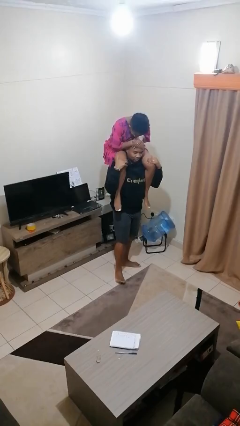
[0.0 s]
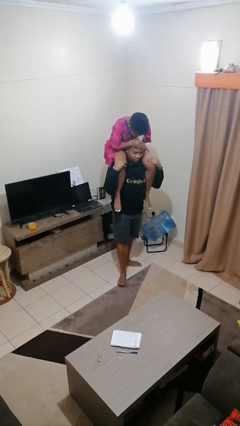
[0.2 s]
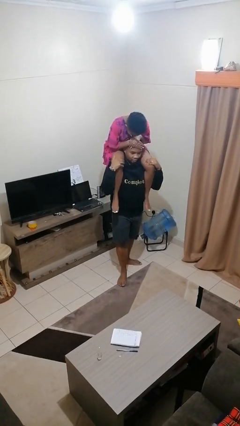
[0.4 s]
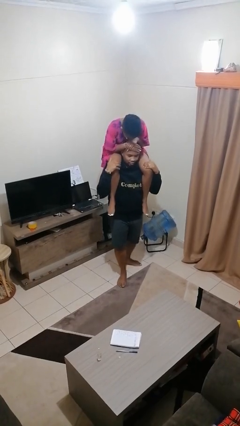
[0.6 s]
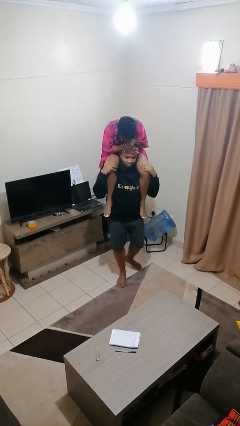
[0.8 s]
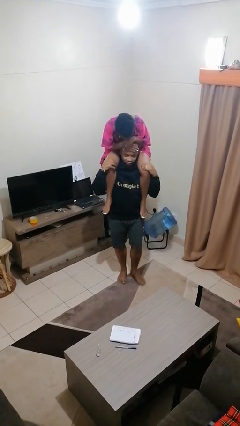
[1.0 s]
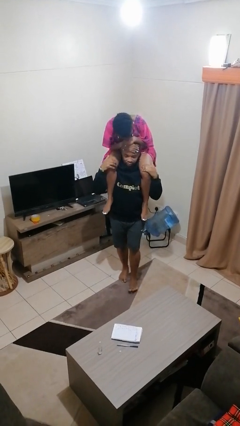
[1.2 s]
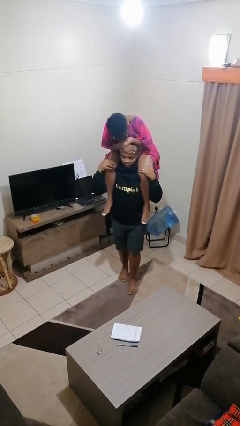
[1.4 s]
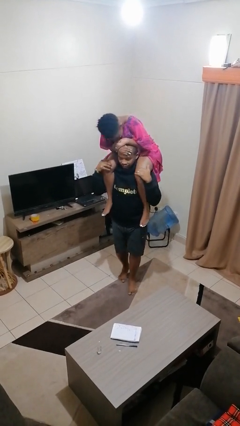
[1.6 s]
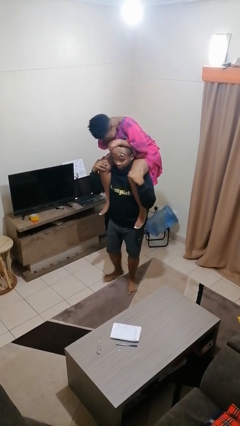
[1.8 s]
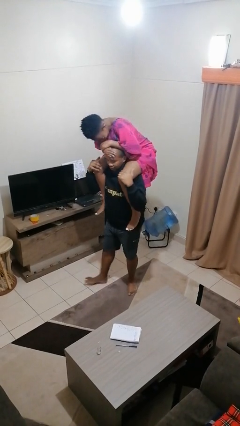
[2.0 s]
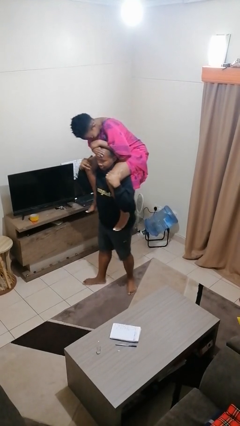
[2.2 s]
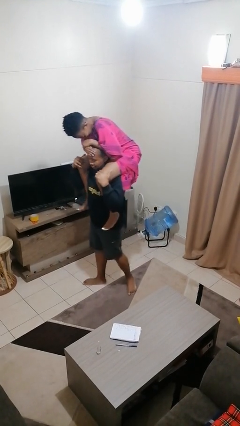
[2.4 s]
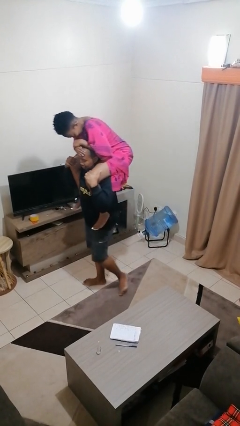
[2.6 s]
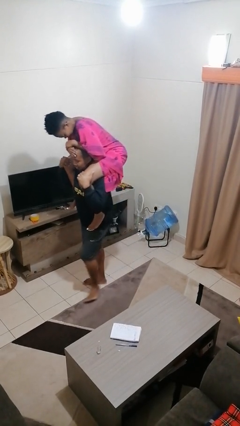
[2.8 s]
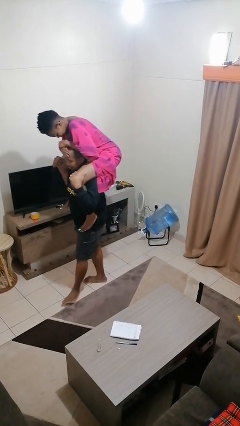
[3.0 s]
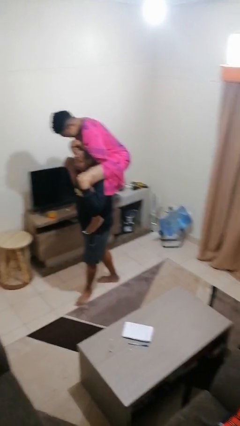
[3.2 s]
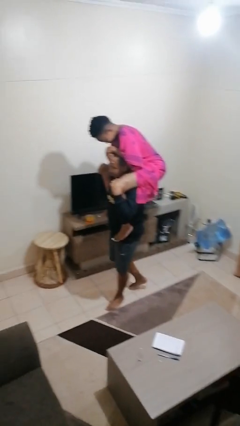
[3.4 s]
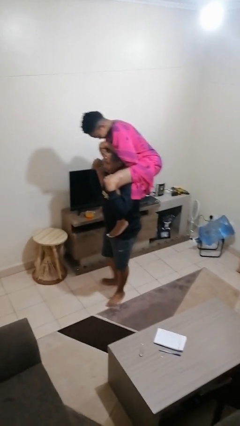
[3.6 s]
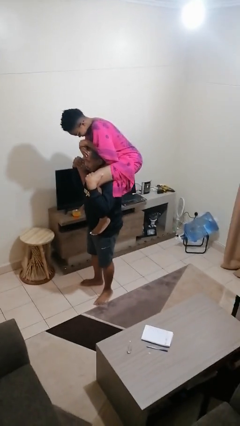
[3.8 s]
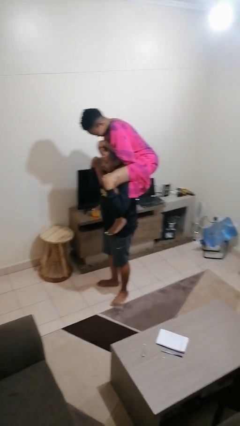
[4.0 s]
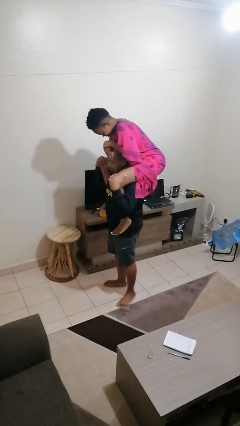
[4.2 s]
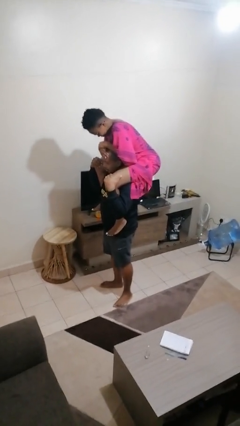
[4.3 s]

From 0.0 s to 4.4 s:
person carries person on shoulders

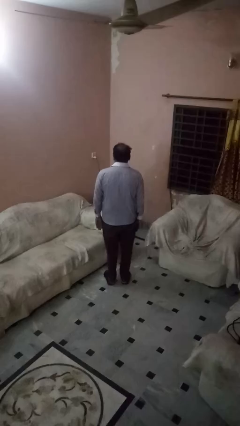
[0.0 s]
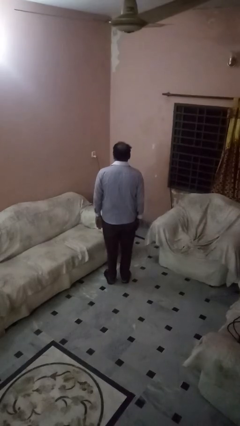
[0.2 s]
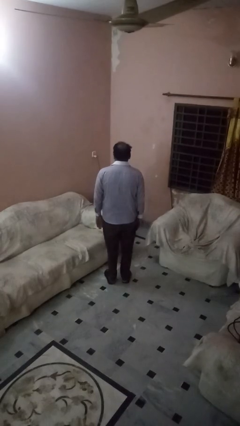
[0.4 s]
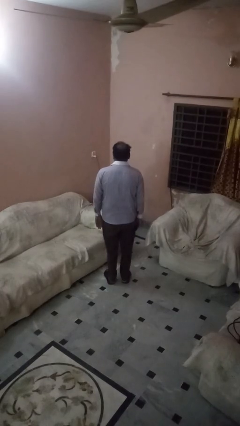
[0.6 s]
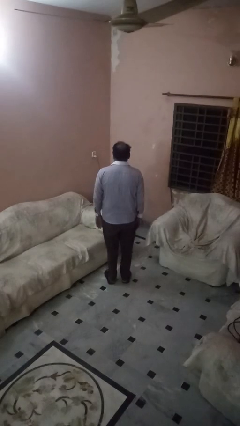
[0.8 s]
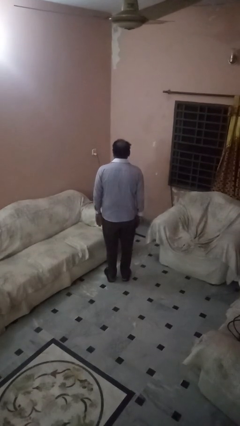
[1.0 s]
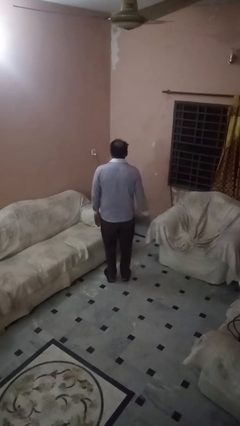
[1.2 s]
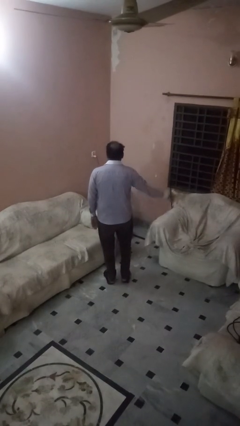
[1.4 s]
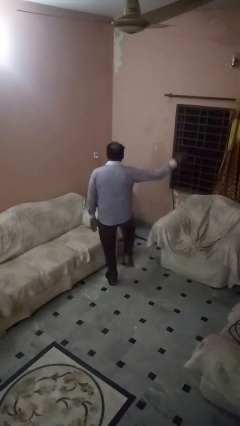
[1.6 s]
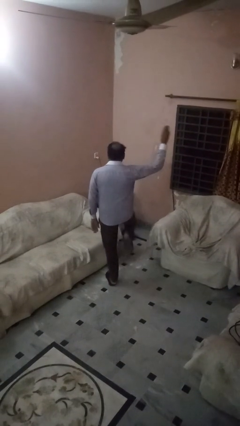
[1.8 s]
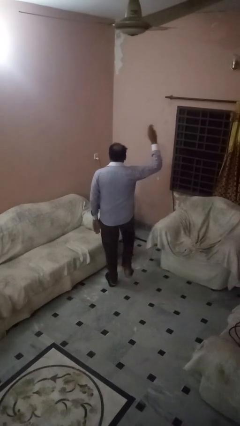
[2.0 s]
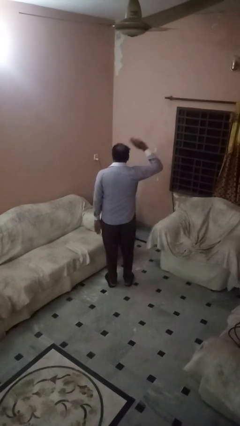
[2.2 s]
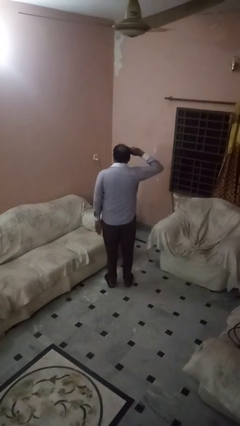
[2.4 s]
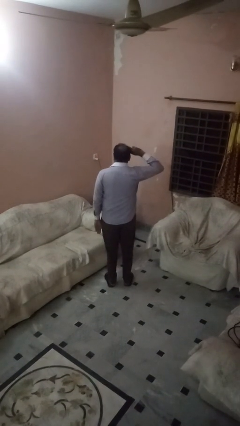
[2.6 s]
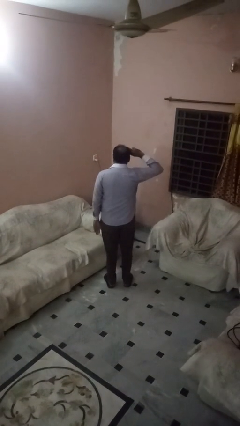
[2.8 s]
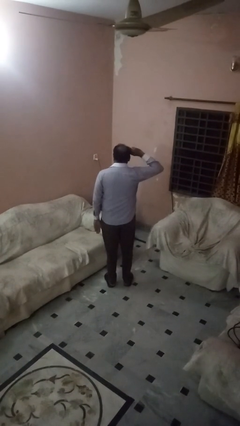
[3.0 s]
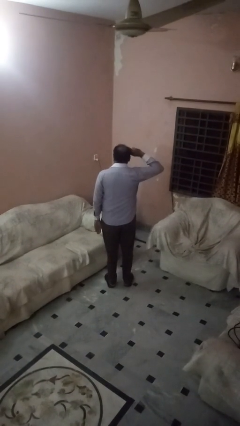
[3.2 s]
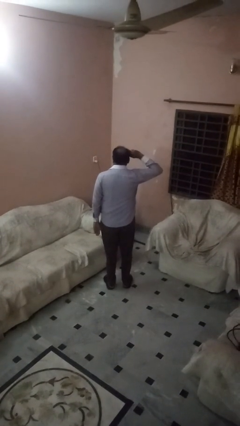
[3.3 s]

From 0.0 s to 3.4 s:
person salutes

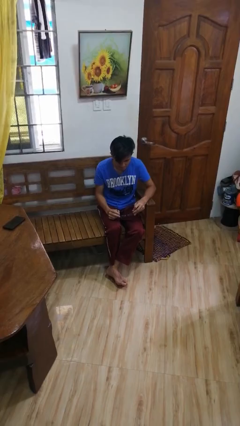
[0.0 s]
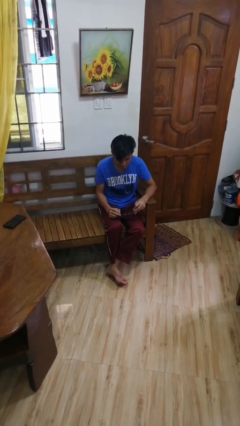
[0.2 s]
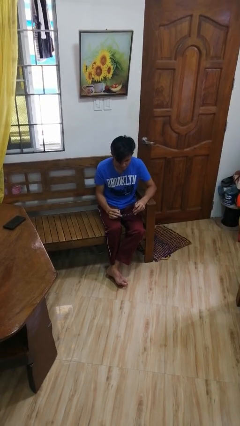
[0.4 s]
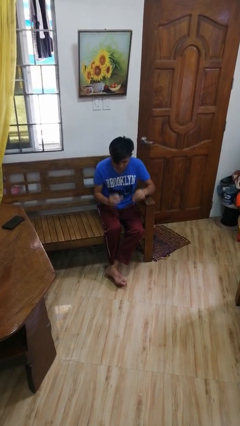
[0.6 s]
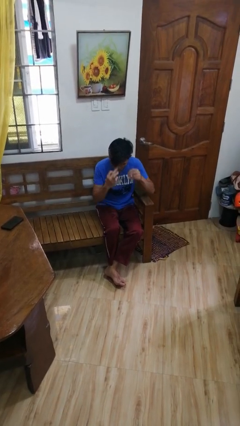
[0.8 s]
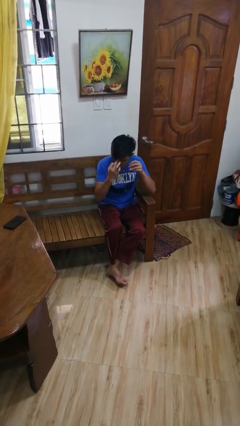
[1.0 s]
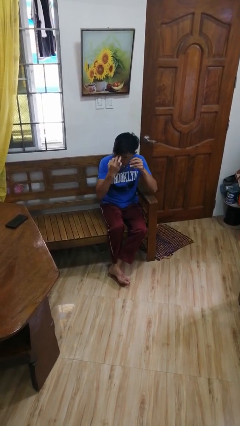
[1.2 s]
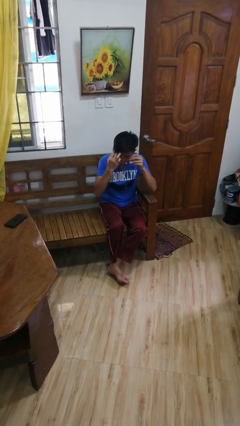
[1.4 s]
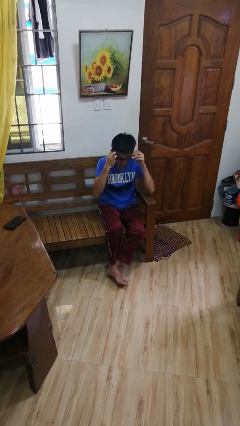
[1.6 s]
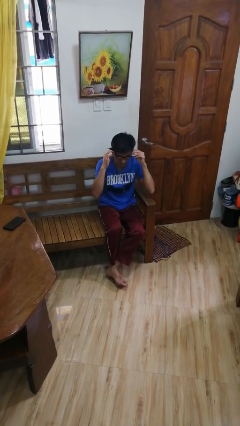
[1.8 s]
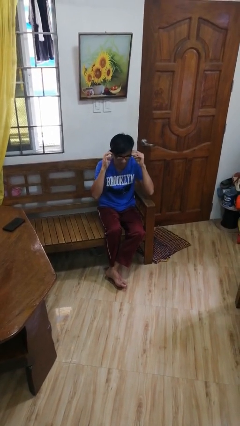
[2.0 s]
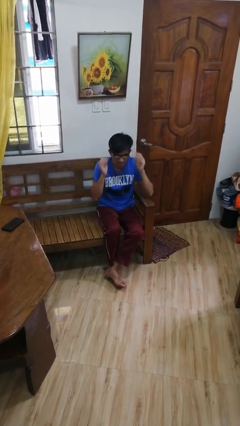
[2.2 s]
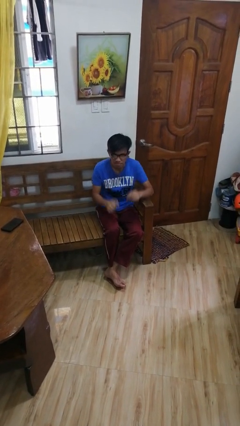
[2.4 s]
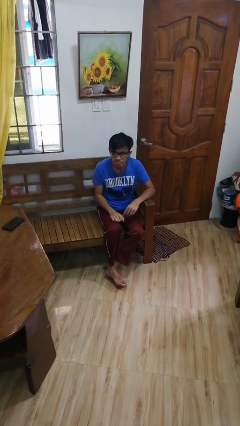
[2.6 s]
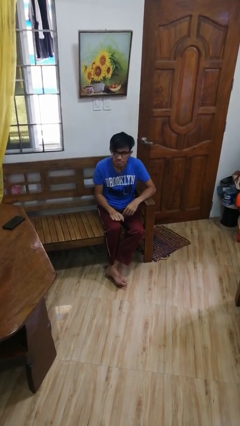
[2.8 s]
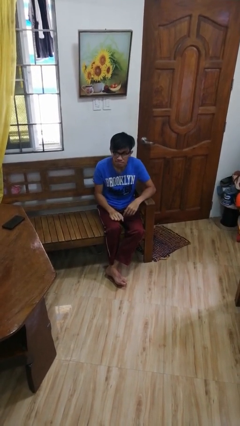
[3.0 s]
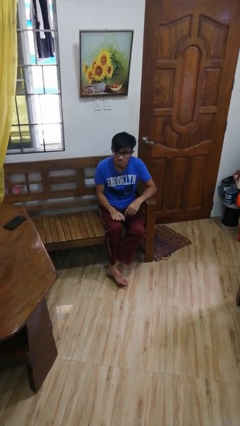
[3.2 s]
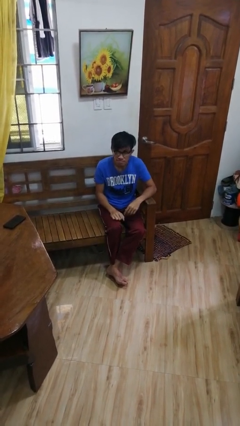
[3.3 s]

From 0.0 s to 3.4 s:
person puts on glasses

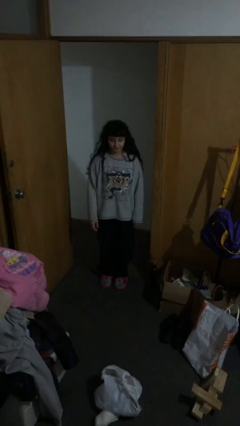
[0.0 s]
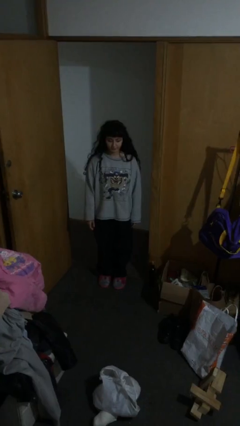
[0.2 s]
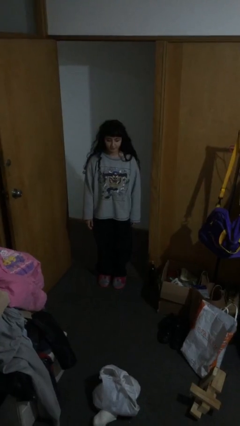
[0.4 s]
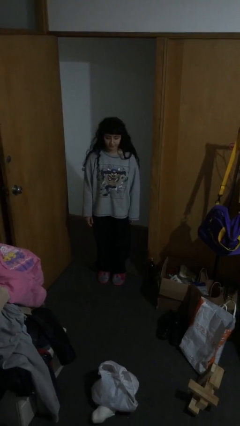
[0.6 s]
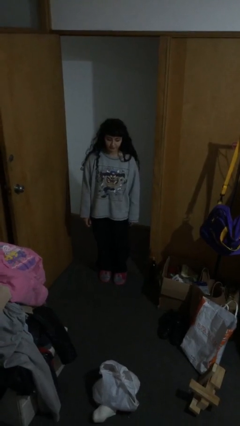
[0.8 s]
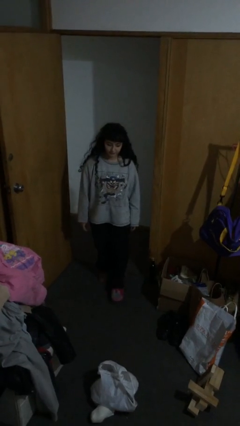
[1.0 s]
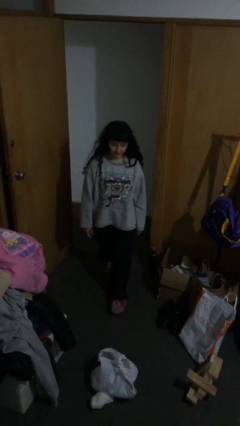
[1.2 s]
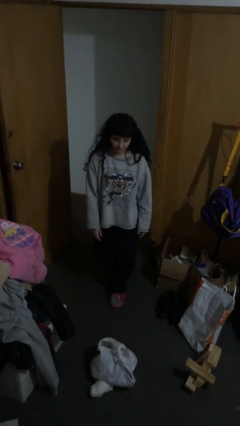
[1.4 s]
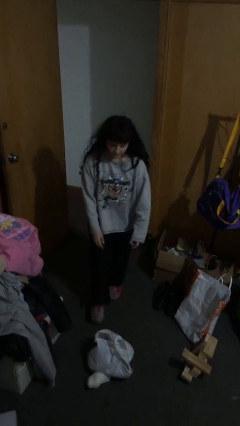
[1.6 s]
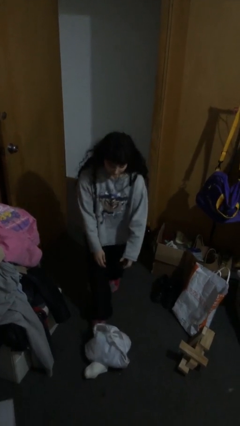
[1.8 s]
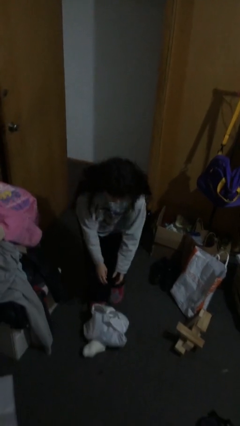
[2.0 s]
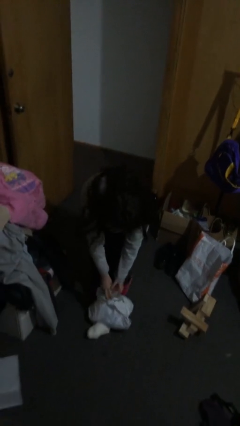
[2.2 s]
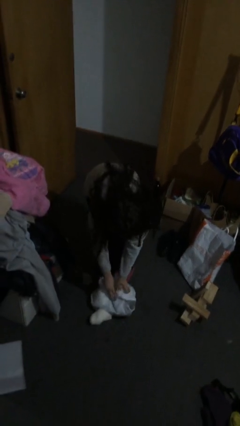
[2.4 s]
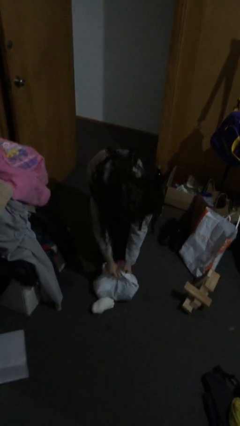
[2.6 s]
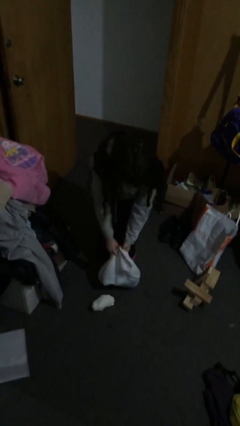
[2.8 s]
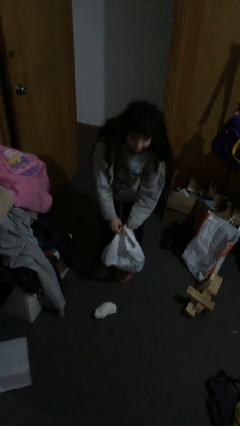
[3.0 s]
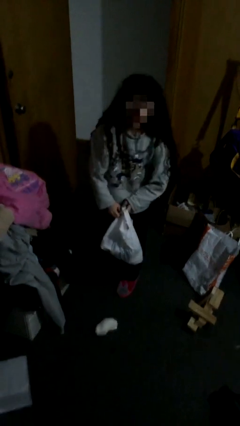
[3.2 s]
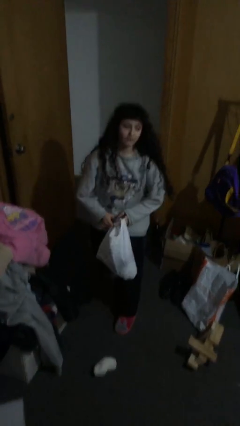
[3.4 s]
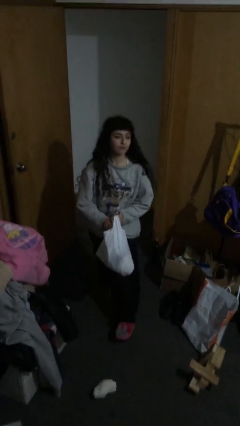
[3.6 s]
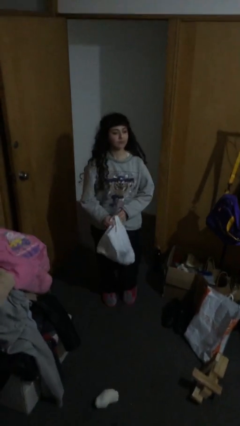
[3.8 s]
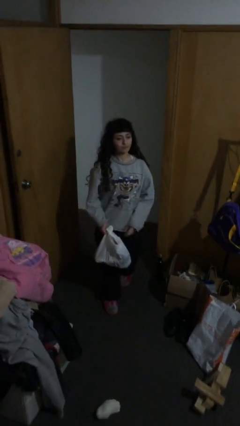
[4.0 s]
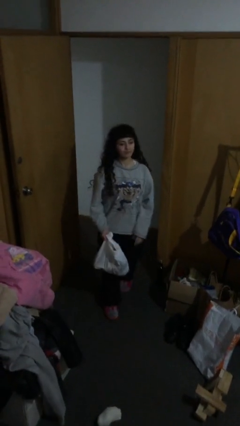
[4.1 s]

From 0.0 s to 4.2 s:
person picks up object from floor

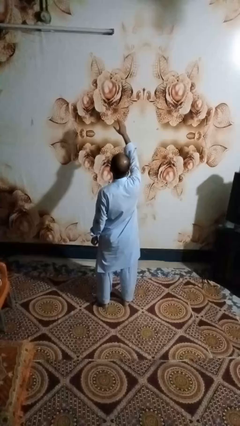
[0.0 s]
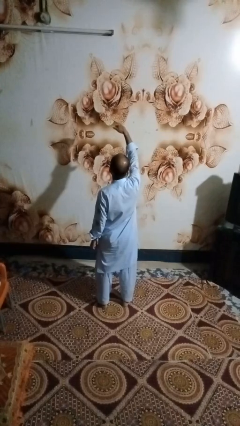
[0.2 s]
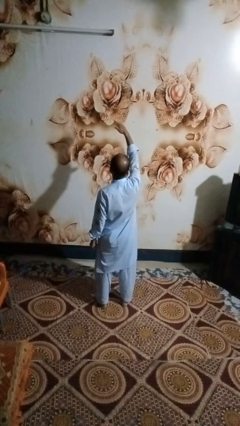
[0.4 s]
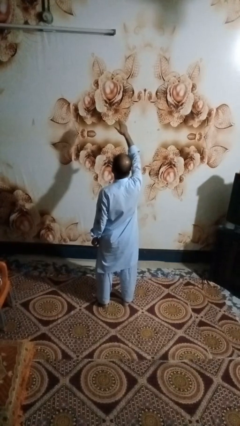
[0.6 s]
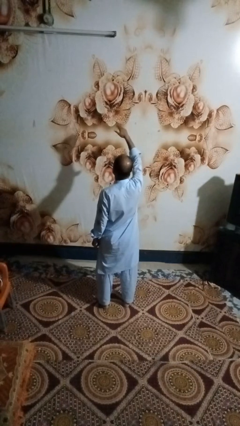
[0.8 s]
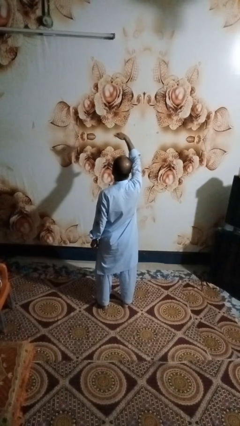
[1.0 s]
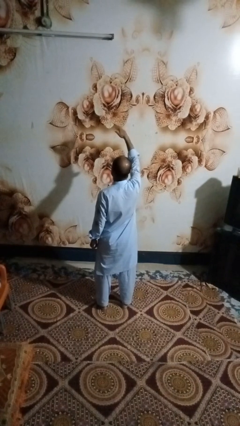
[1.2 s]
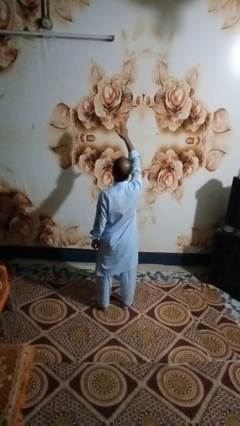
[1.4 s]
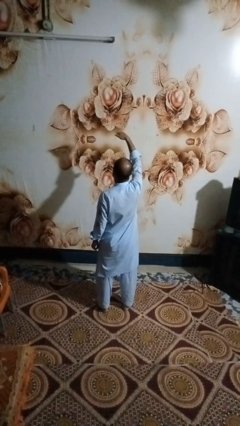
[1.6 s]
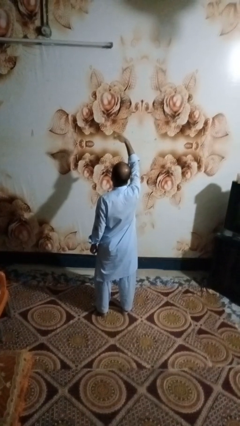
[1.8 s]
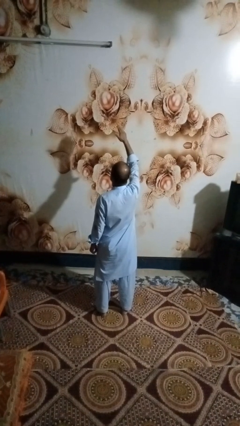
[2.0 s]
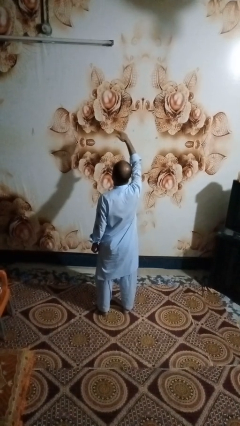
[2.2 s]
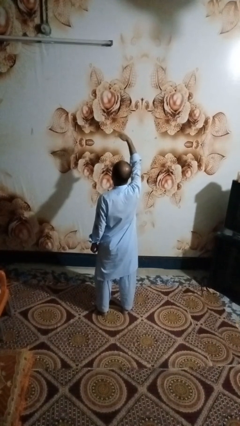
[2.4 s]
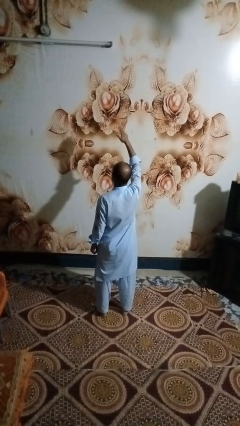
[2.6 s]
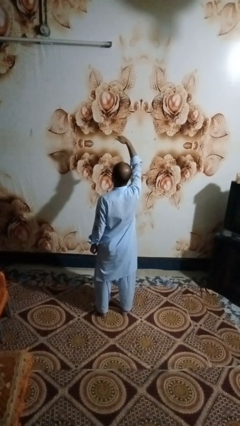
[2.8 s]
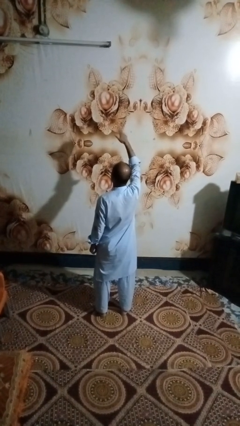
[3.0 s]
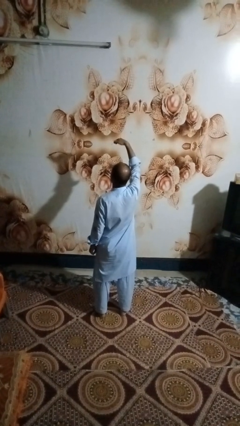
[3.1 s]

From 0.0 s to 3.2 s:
person gestures come here
